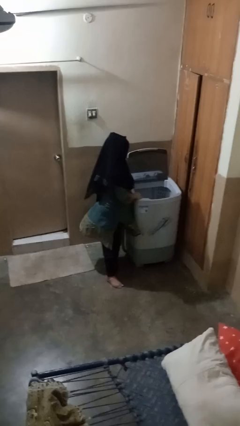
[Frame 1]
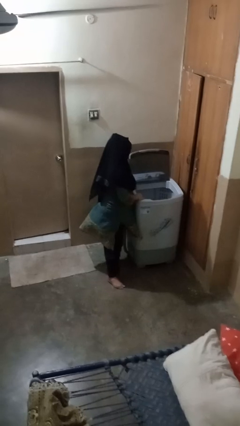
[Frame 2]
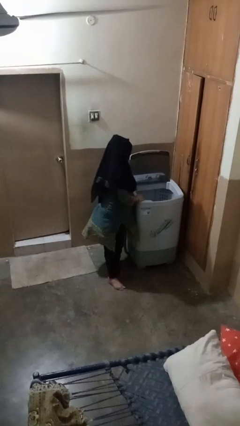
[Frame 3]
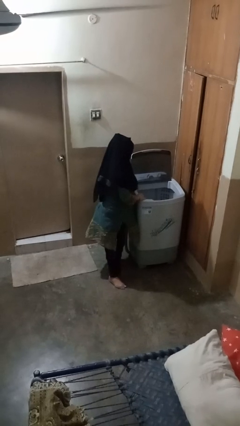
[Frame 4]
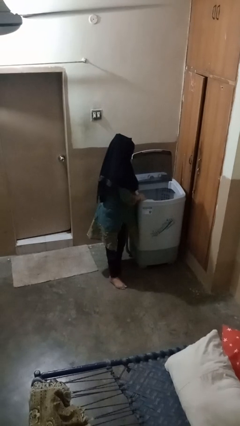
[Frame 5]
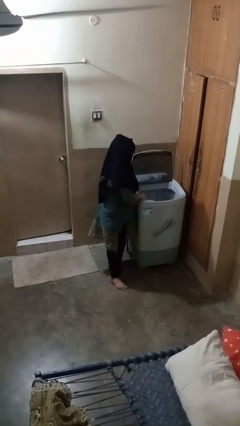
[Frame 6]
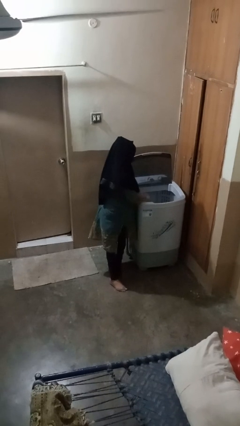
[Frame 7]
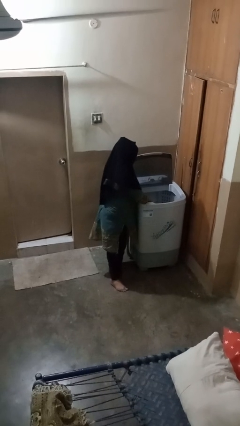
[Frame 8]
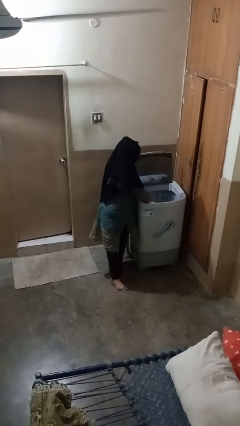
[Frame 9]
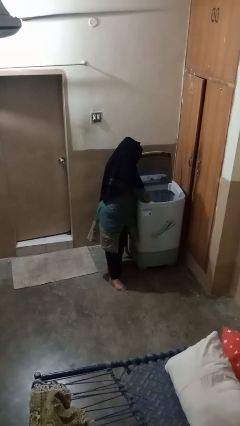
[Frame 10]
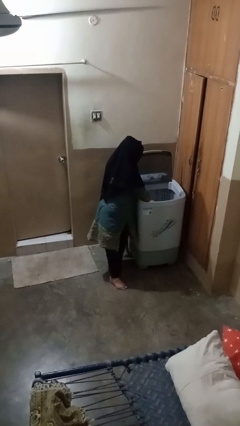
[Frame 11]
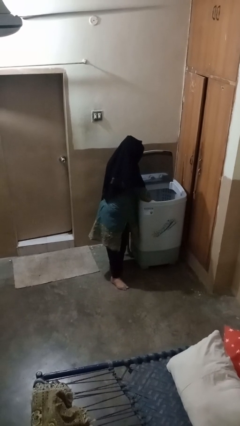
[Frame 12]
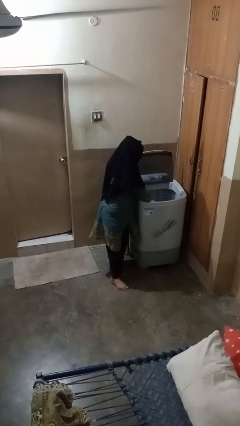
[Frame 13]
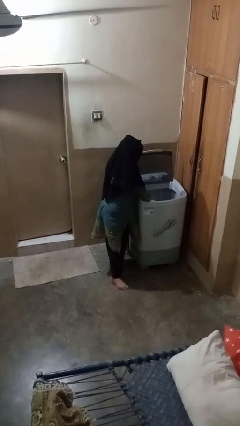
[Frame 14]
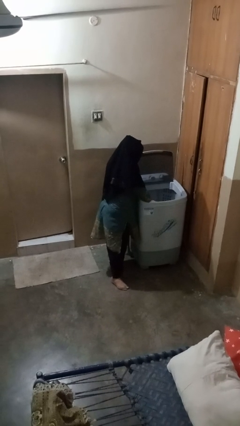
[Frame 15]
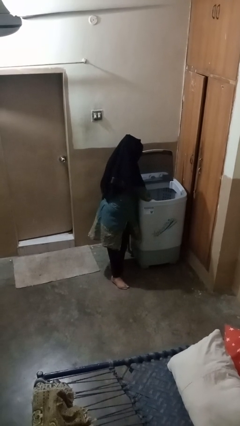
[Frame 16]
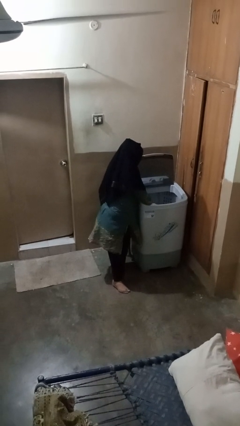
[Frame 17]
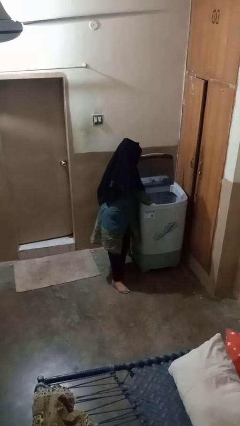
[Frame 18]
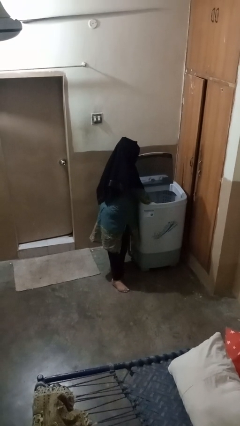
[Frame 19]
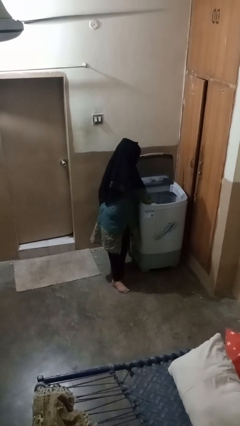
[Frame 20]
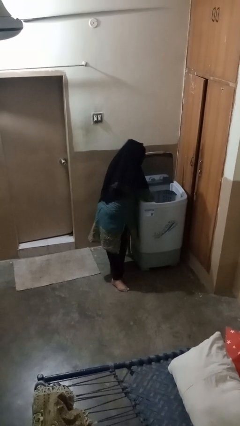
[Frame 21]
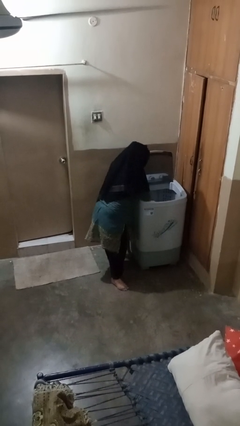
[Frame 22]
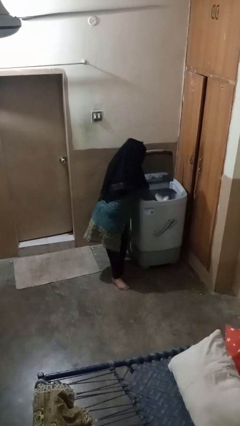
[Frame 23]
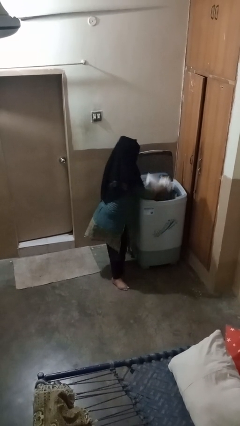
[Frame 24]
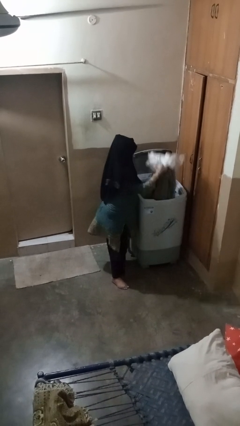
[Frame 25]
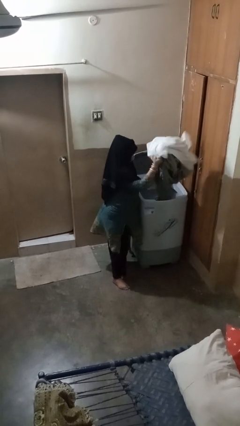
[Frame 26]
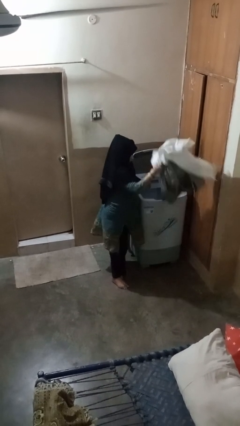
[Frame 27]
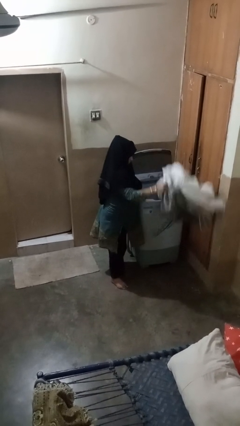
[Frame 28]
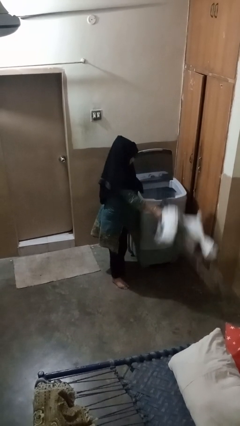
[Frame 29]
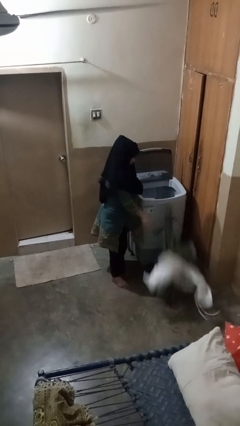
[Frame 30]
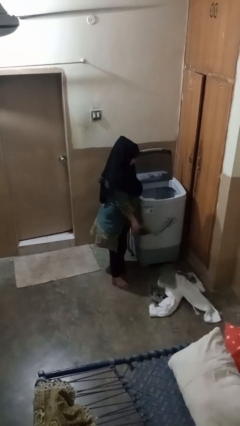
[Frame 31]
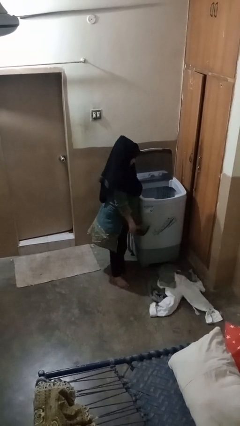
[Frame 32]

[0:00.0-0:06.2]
person unloads clotheswasher

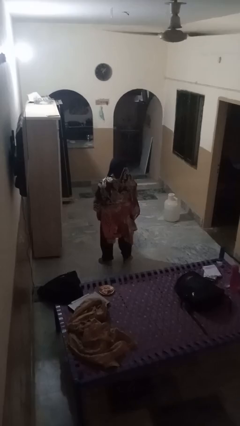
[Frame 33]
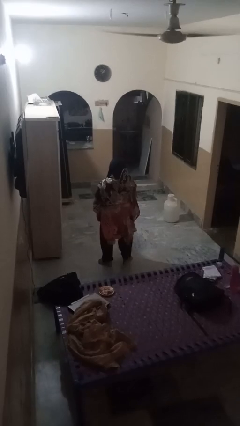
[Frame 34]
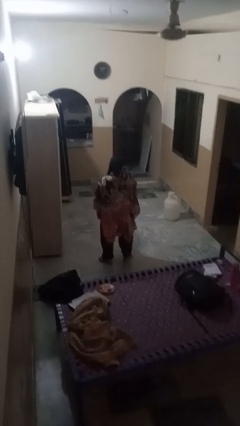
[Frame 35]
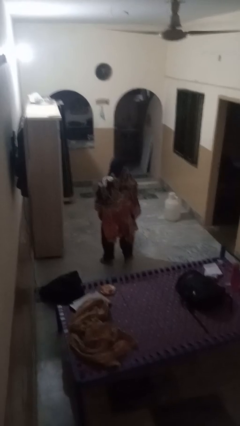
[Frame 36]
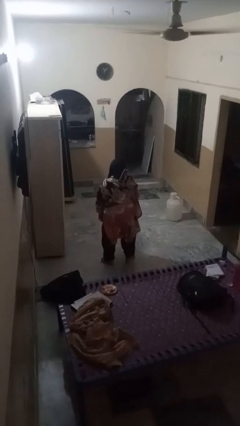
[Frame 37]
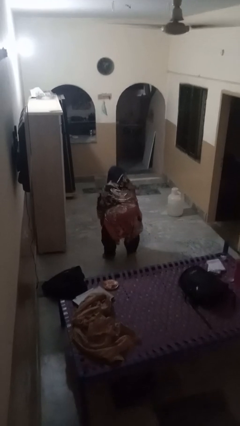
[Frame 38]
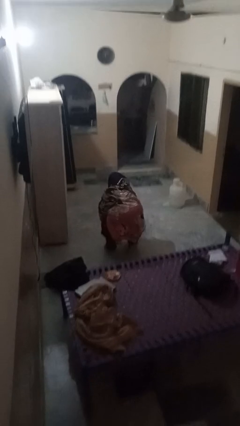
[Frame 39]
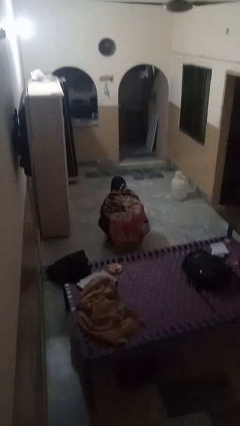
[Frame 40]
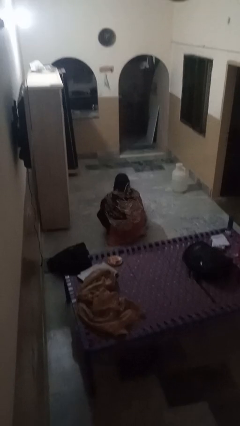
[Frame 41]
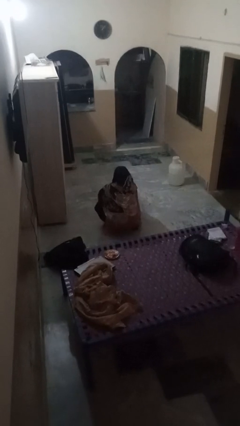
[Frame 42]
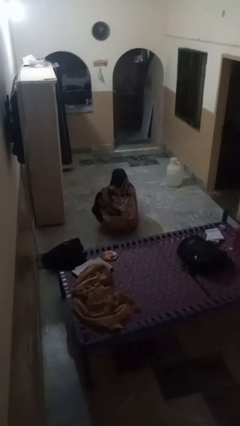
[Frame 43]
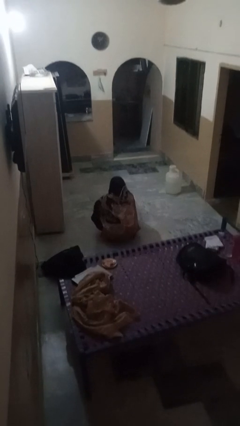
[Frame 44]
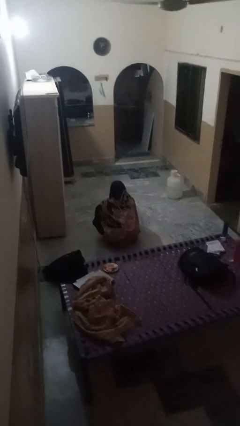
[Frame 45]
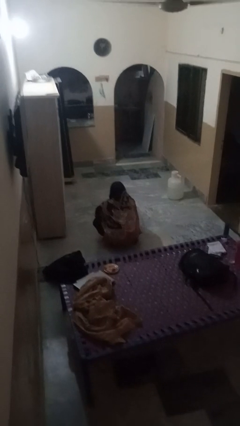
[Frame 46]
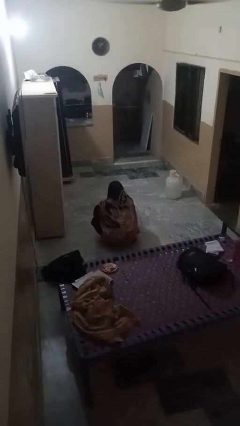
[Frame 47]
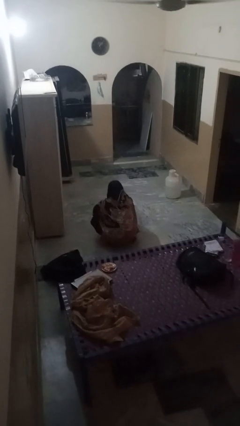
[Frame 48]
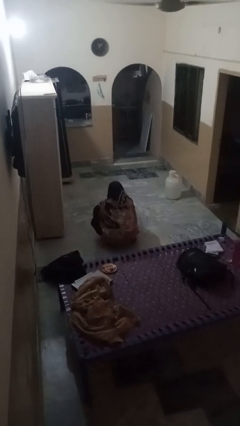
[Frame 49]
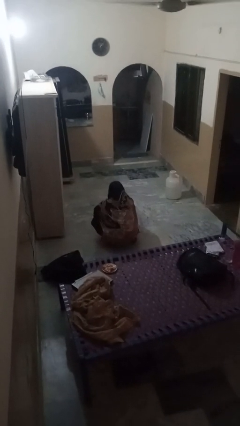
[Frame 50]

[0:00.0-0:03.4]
person squats

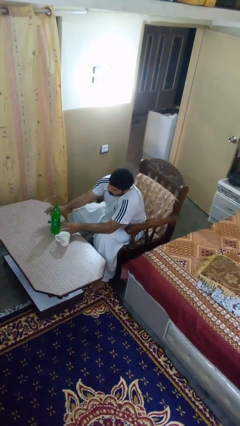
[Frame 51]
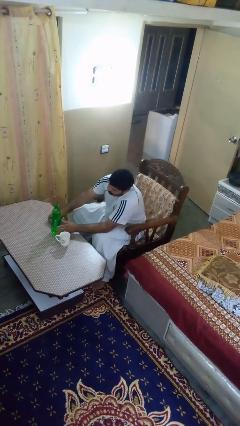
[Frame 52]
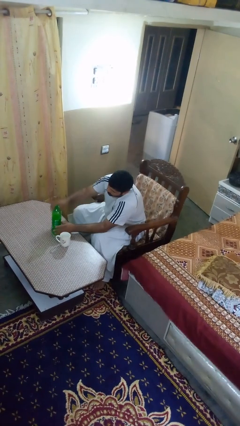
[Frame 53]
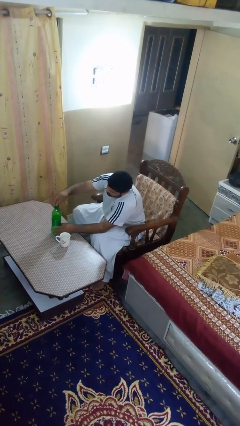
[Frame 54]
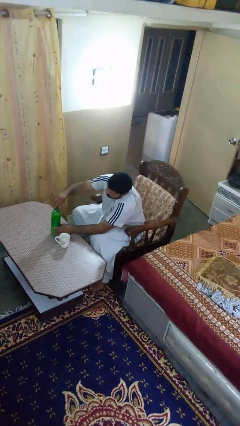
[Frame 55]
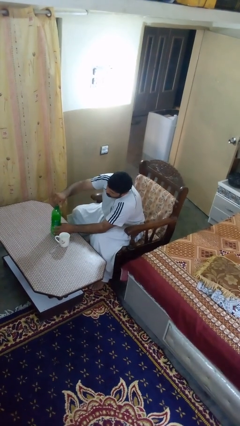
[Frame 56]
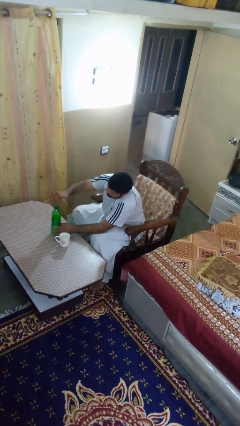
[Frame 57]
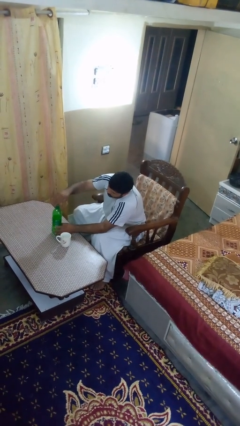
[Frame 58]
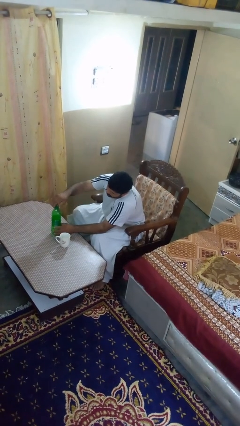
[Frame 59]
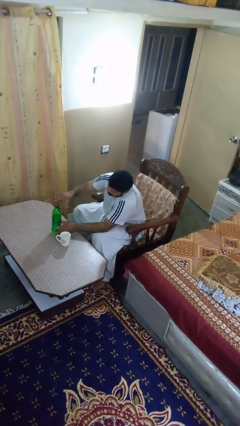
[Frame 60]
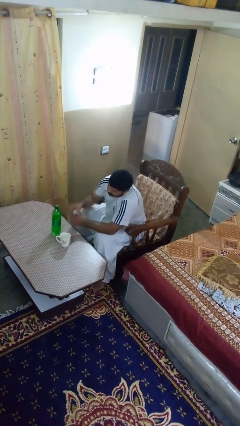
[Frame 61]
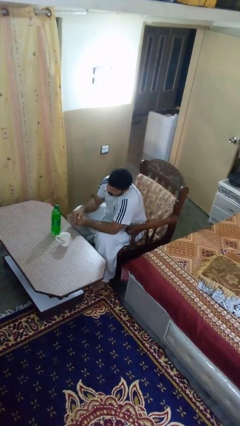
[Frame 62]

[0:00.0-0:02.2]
person screws lid to bottle

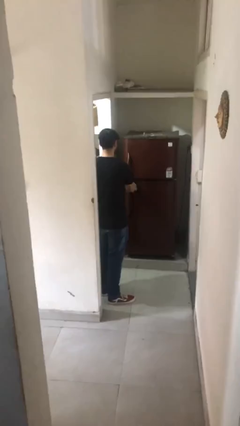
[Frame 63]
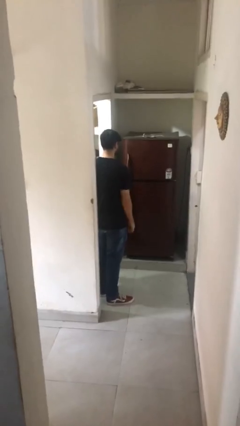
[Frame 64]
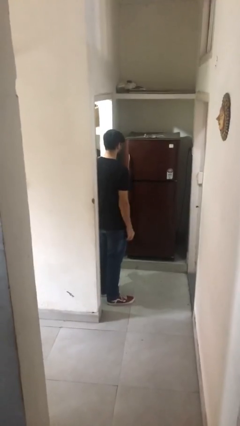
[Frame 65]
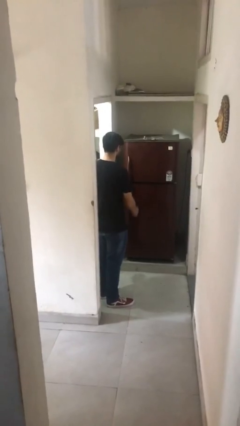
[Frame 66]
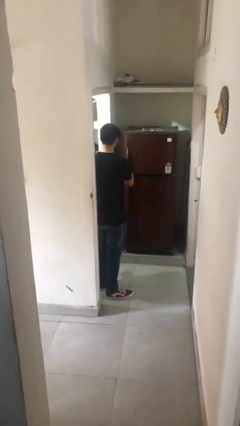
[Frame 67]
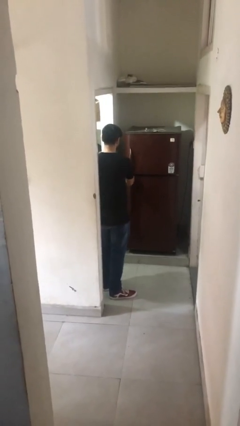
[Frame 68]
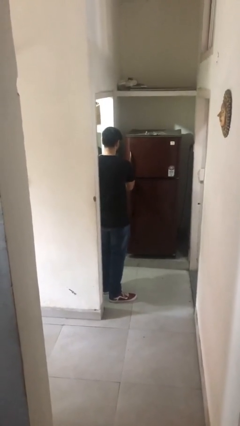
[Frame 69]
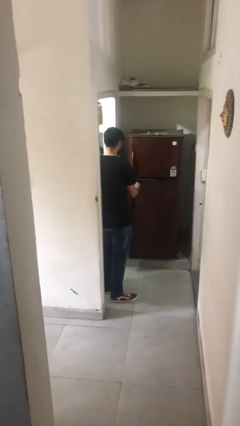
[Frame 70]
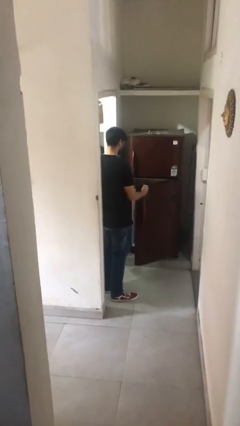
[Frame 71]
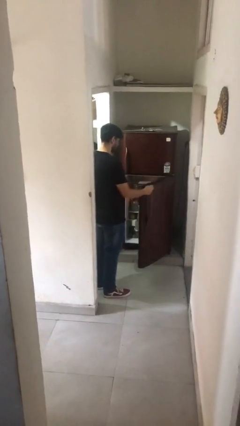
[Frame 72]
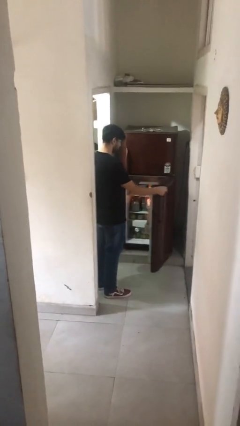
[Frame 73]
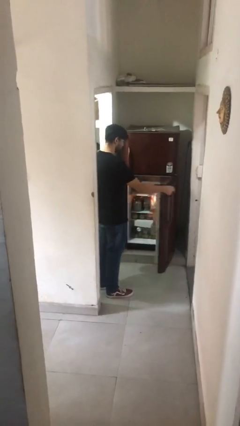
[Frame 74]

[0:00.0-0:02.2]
person opens refrigerator

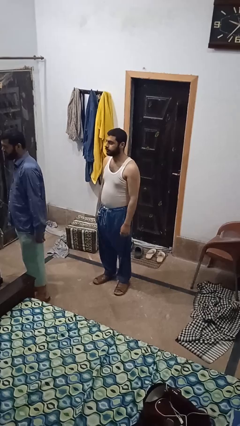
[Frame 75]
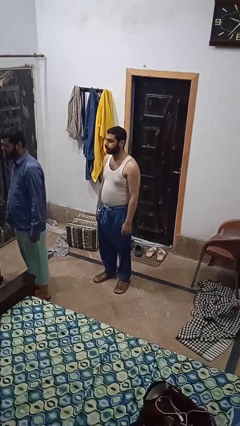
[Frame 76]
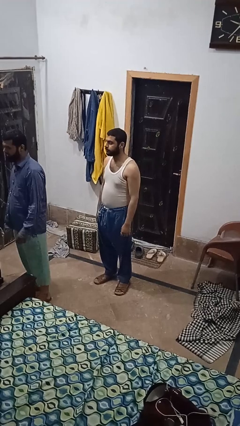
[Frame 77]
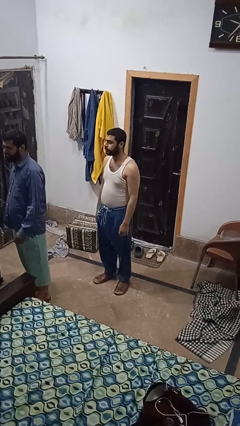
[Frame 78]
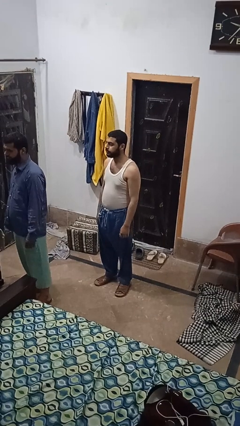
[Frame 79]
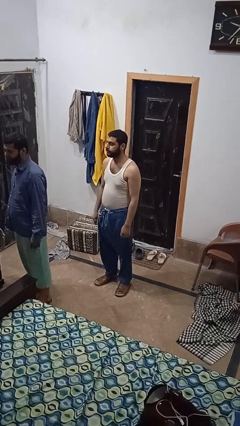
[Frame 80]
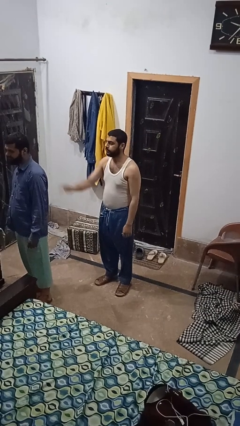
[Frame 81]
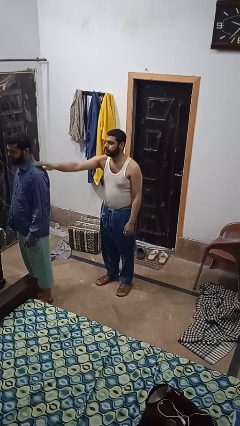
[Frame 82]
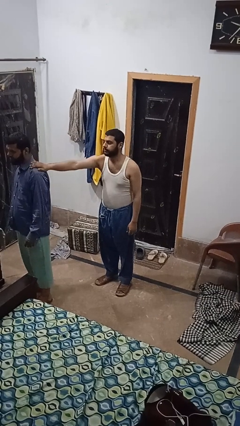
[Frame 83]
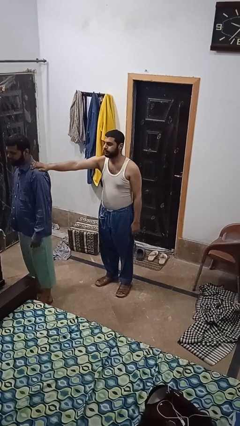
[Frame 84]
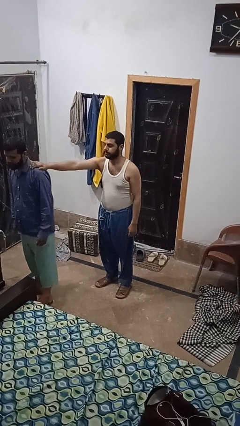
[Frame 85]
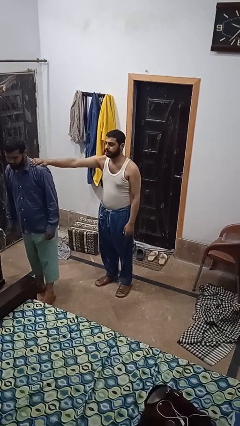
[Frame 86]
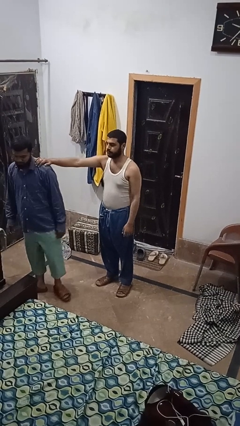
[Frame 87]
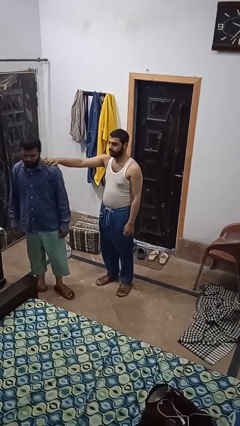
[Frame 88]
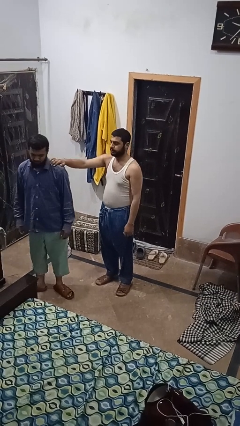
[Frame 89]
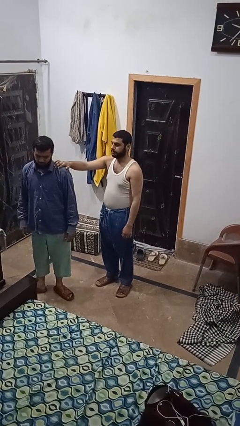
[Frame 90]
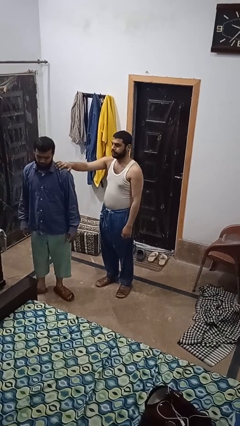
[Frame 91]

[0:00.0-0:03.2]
person grabs person by shoulder
